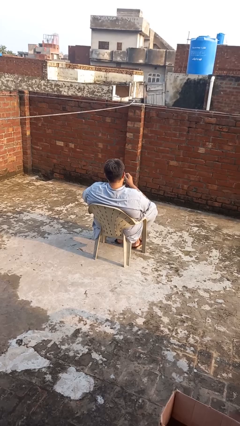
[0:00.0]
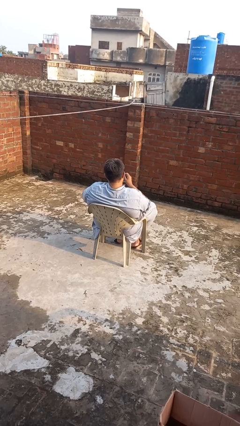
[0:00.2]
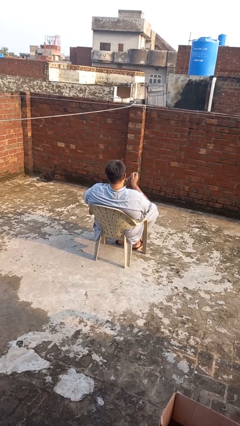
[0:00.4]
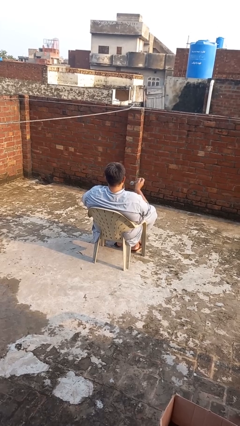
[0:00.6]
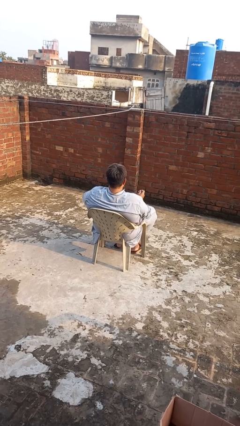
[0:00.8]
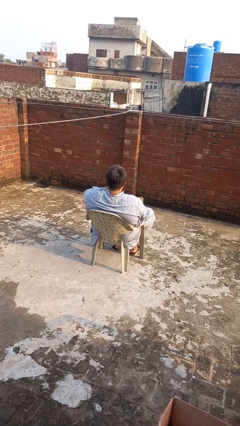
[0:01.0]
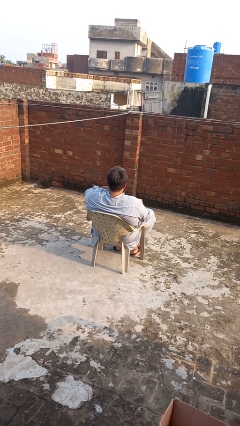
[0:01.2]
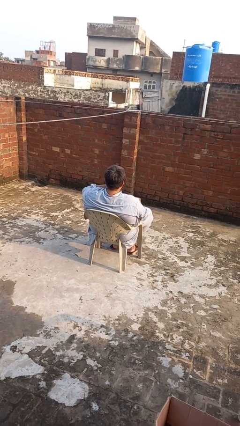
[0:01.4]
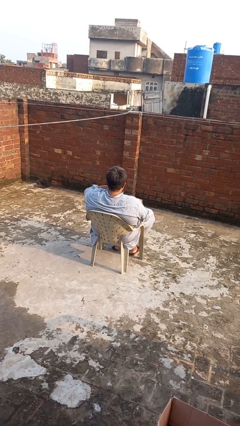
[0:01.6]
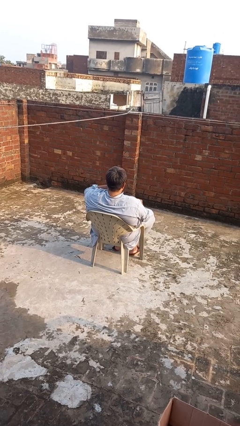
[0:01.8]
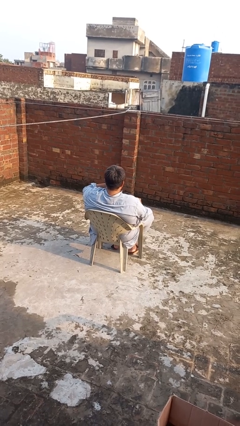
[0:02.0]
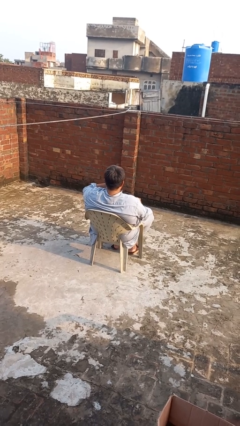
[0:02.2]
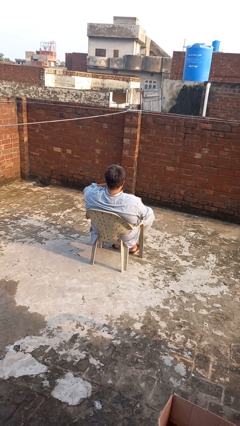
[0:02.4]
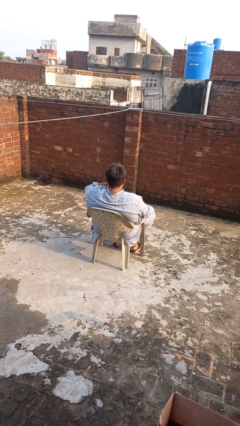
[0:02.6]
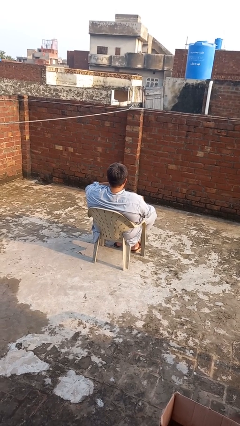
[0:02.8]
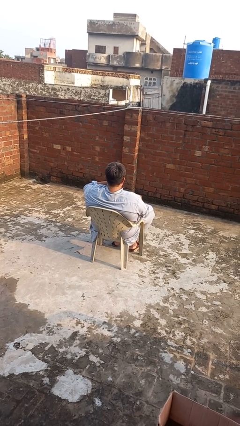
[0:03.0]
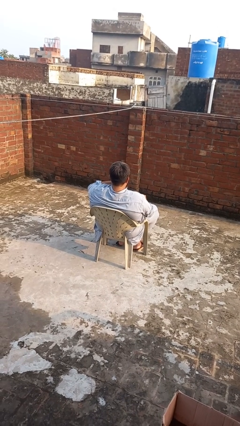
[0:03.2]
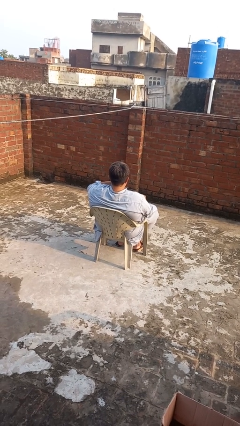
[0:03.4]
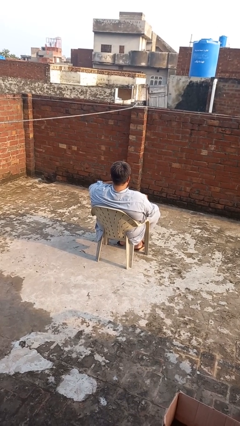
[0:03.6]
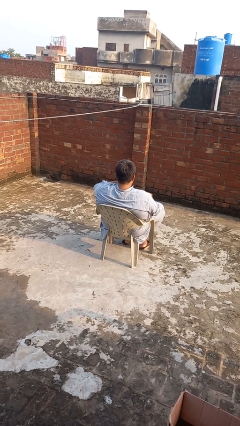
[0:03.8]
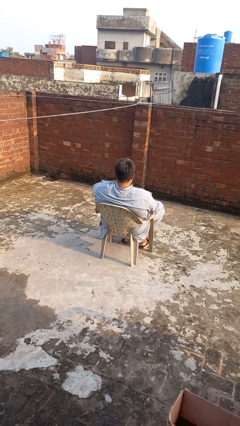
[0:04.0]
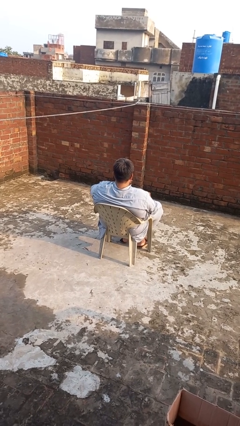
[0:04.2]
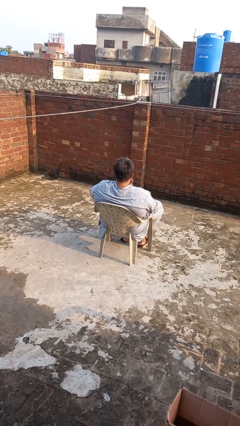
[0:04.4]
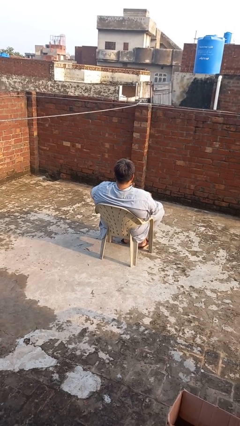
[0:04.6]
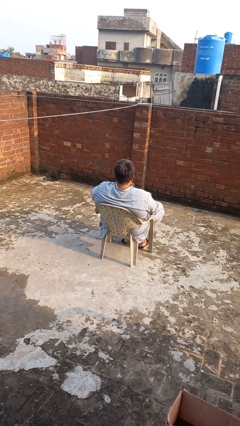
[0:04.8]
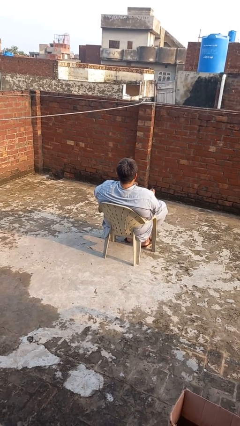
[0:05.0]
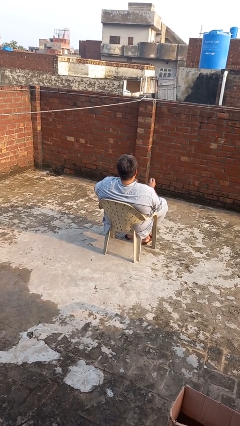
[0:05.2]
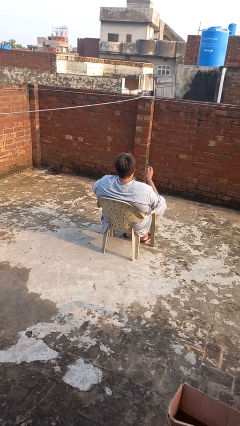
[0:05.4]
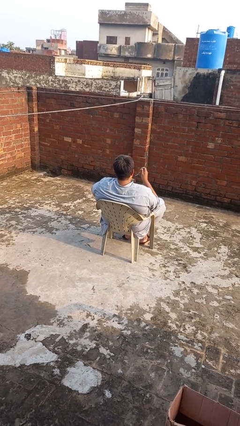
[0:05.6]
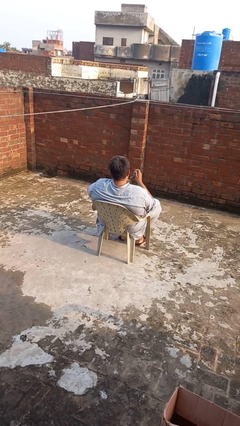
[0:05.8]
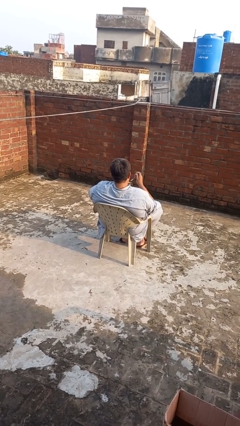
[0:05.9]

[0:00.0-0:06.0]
person drinks from mug

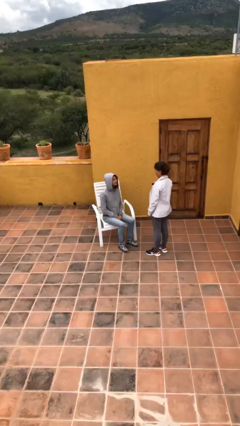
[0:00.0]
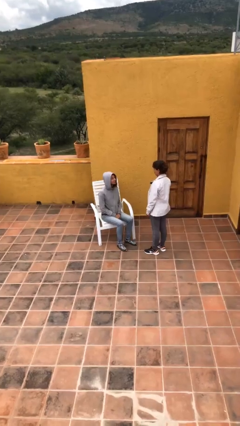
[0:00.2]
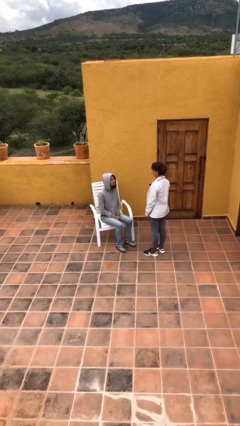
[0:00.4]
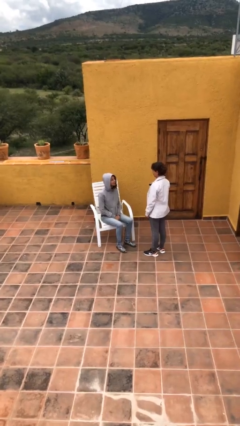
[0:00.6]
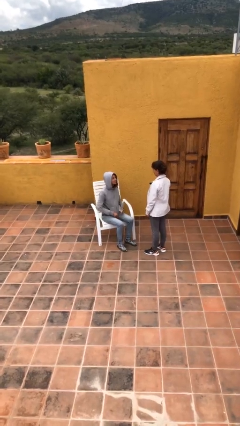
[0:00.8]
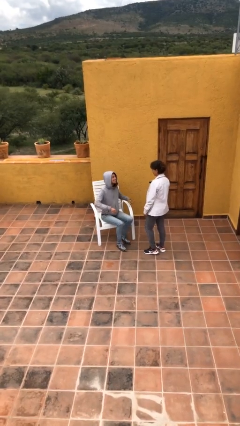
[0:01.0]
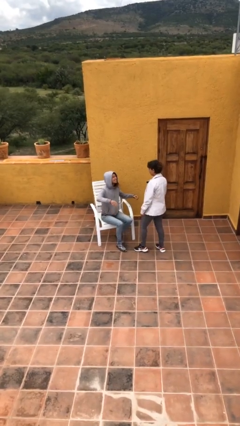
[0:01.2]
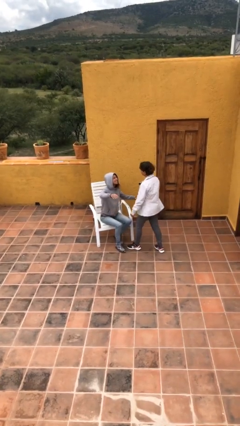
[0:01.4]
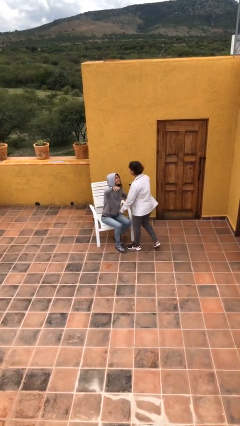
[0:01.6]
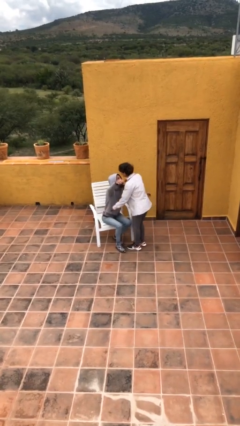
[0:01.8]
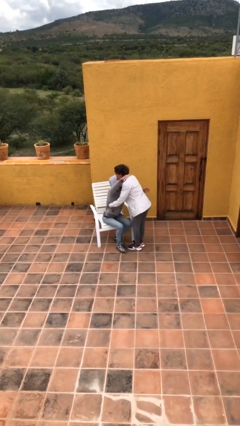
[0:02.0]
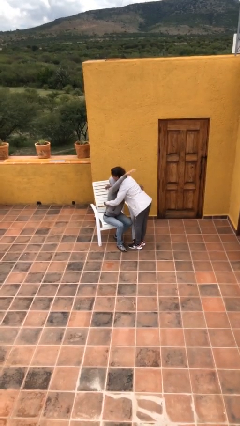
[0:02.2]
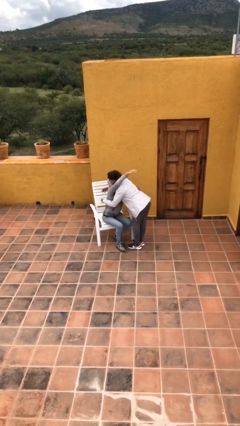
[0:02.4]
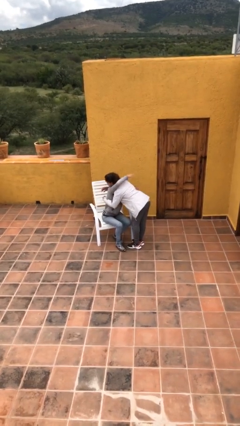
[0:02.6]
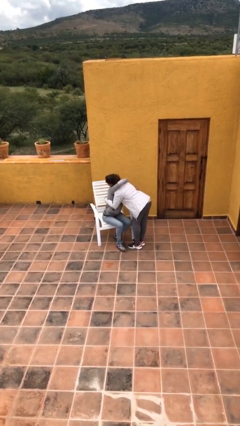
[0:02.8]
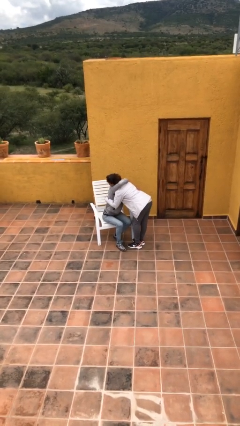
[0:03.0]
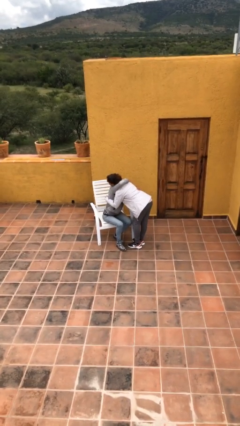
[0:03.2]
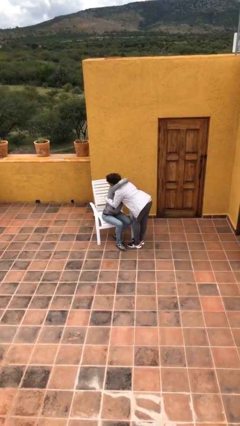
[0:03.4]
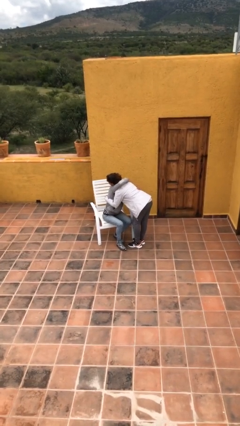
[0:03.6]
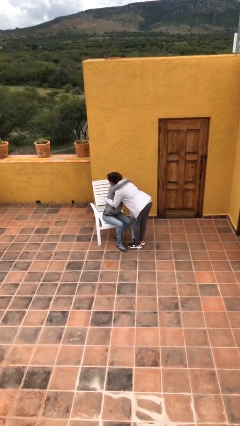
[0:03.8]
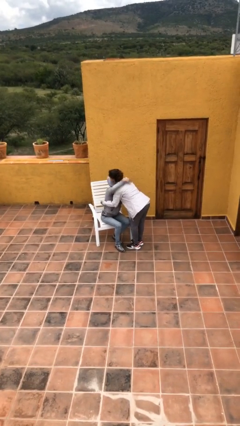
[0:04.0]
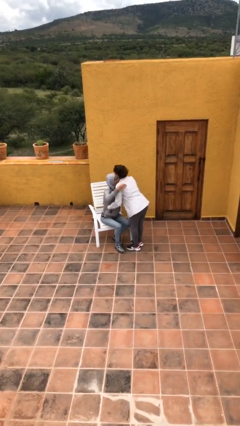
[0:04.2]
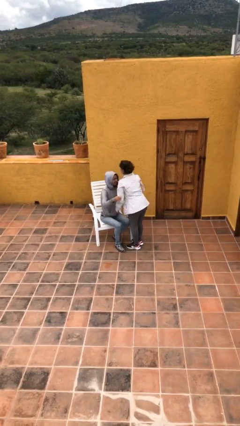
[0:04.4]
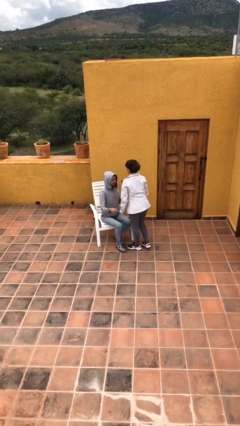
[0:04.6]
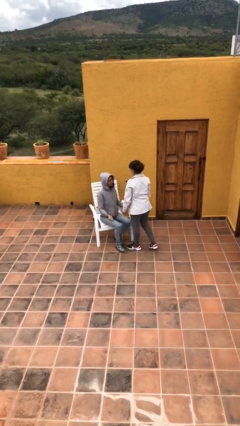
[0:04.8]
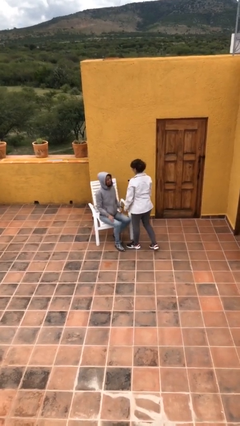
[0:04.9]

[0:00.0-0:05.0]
person embraces person

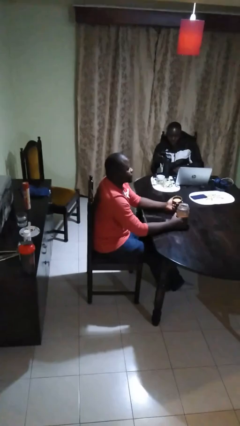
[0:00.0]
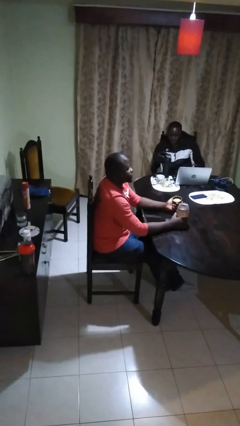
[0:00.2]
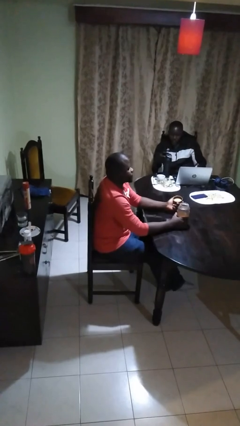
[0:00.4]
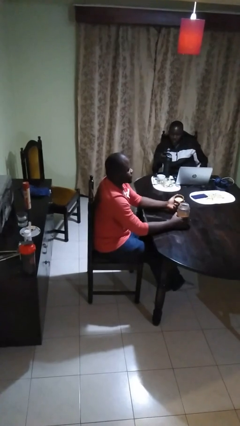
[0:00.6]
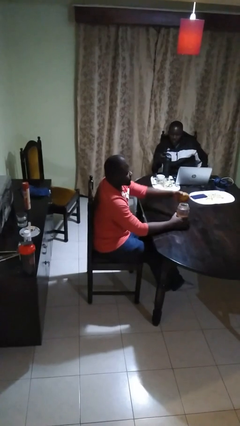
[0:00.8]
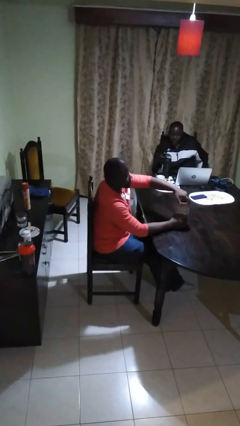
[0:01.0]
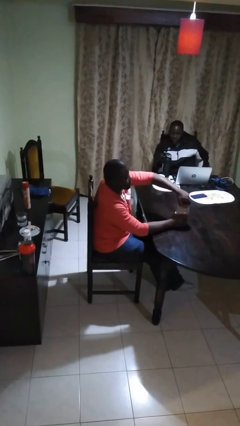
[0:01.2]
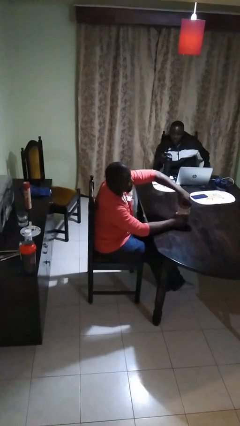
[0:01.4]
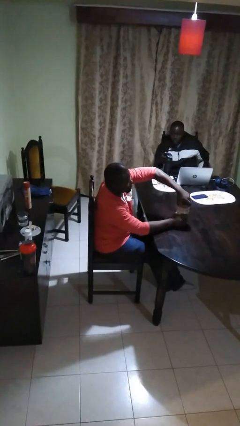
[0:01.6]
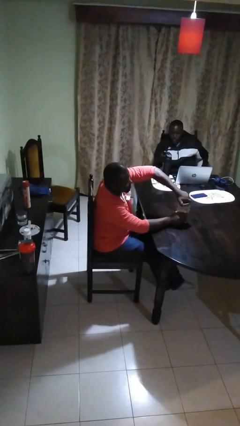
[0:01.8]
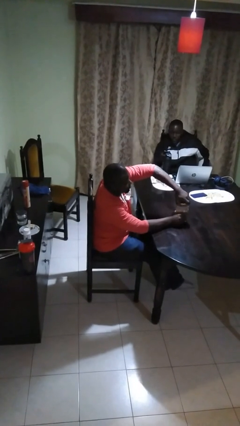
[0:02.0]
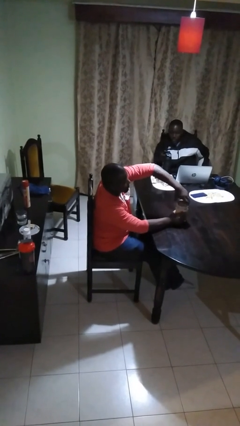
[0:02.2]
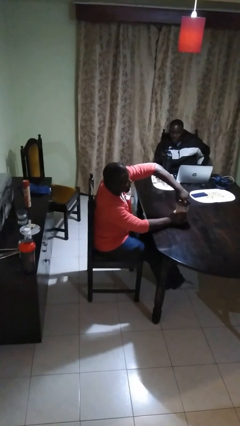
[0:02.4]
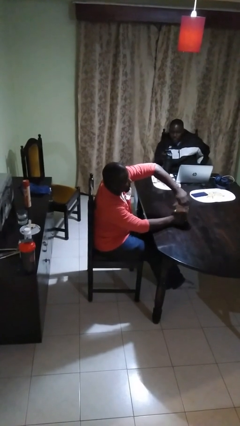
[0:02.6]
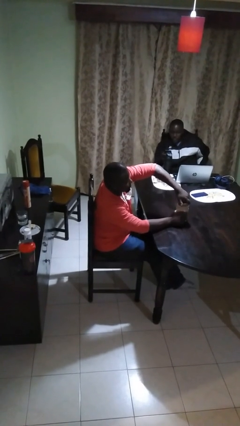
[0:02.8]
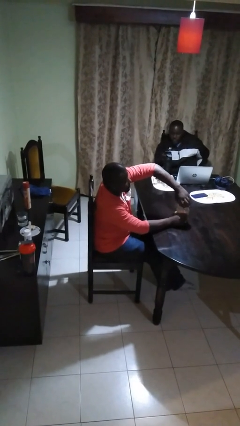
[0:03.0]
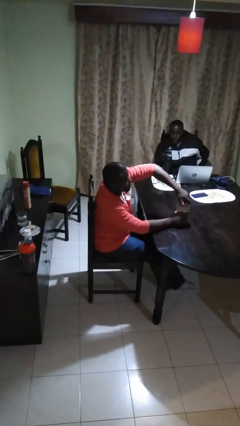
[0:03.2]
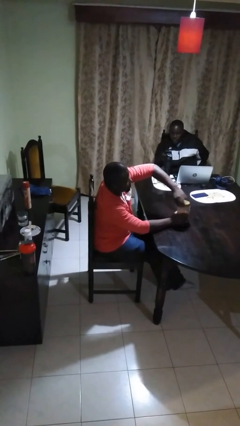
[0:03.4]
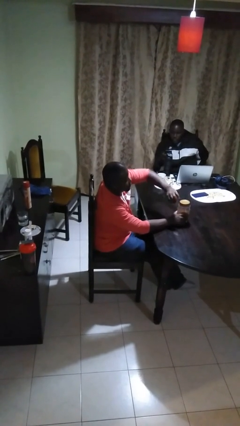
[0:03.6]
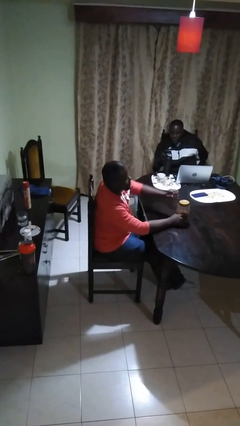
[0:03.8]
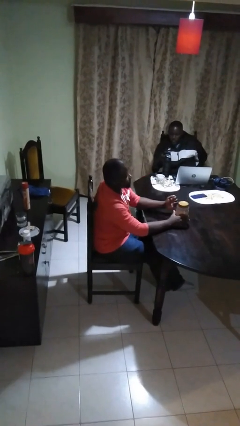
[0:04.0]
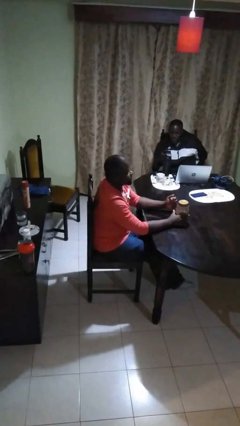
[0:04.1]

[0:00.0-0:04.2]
person closes jar

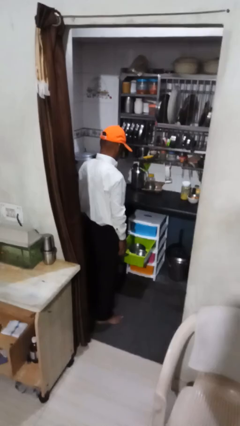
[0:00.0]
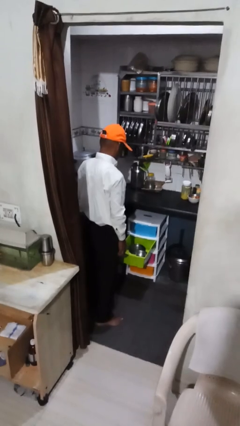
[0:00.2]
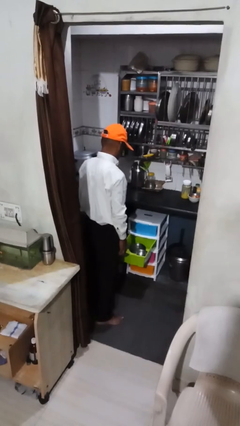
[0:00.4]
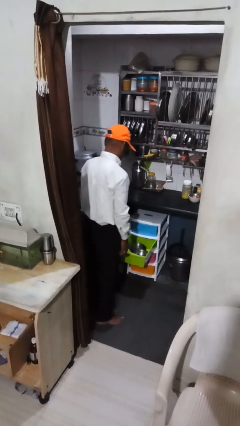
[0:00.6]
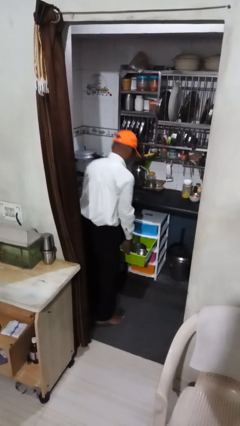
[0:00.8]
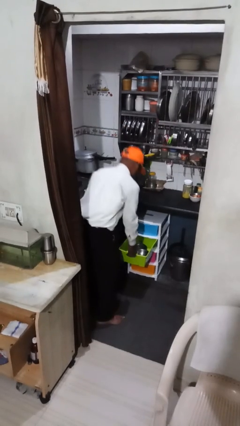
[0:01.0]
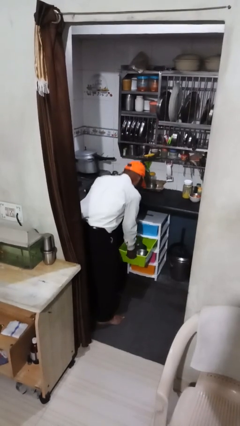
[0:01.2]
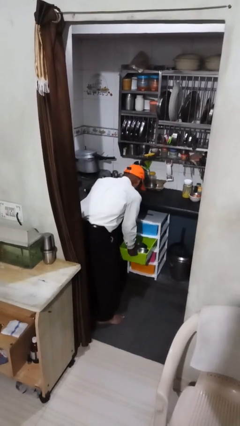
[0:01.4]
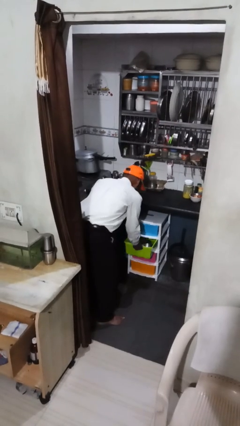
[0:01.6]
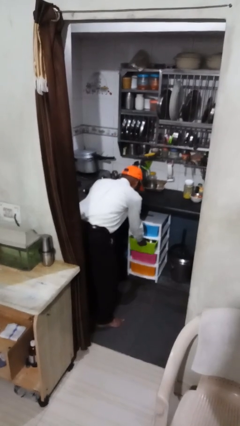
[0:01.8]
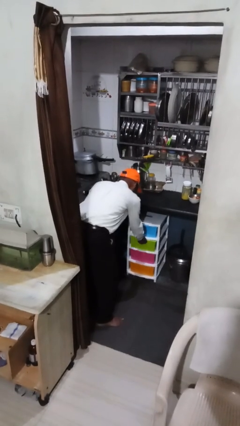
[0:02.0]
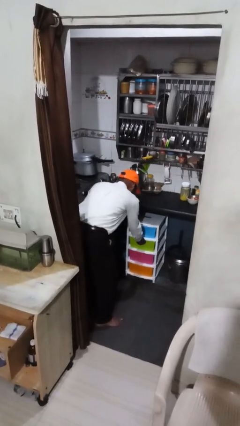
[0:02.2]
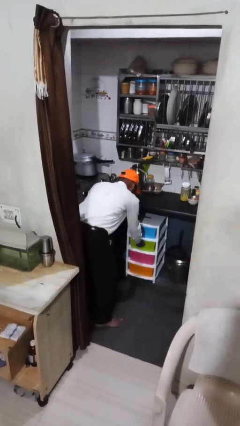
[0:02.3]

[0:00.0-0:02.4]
person closes kitchen drawer
